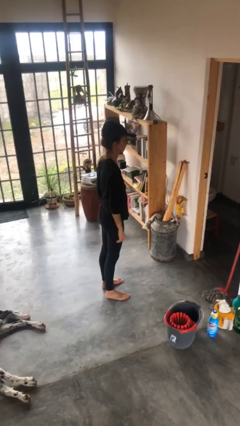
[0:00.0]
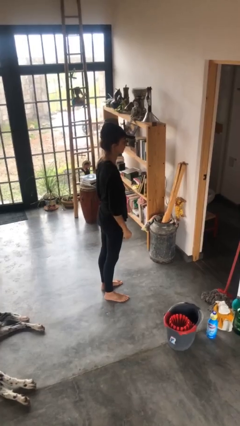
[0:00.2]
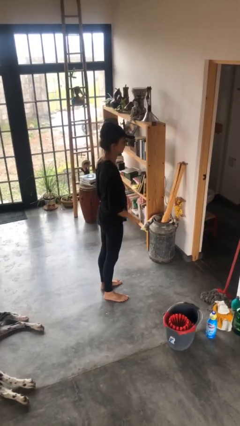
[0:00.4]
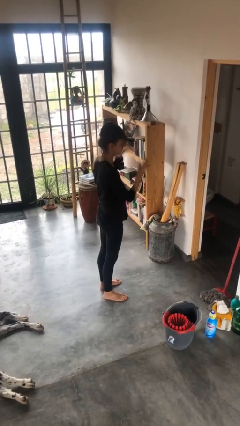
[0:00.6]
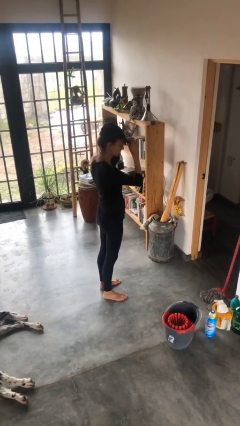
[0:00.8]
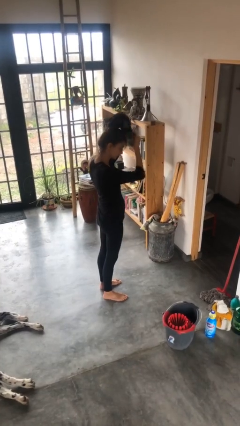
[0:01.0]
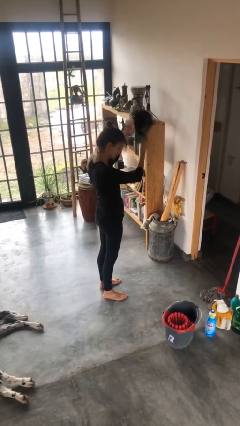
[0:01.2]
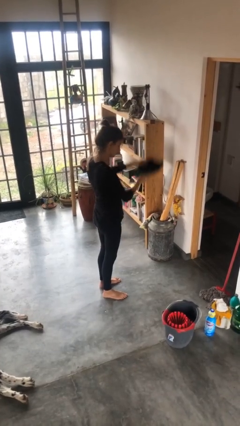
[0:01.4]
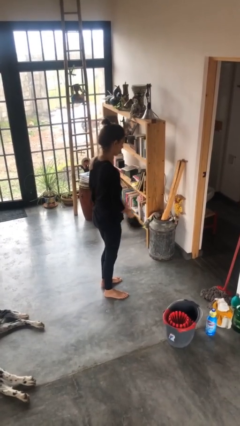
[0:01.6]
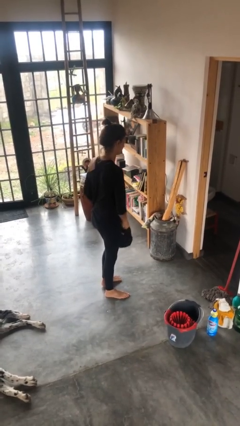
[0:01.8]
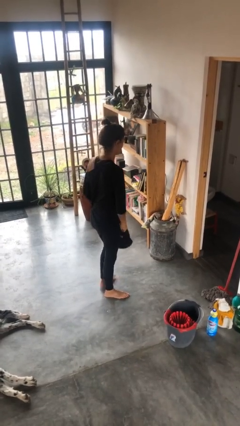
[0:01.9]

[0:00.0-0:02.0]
person takes off hat

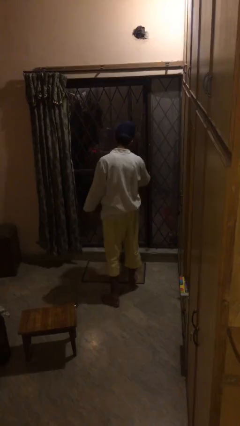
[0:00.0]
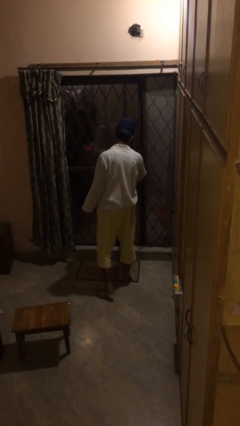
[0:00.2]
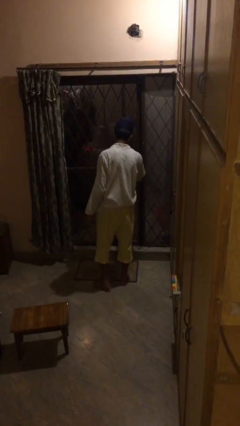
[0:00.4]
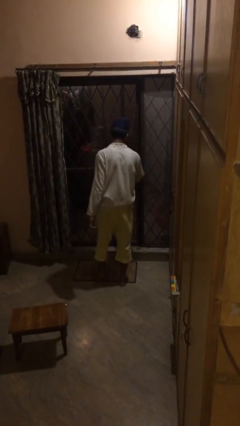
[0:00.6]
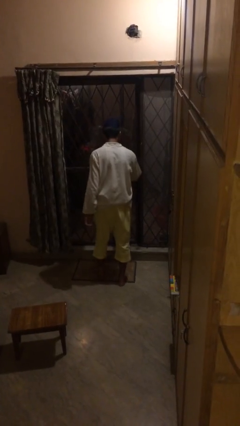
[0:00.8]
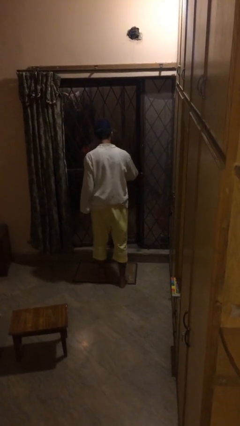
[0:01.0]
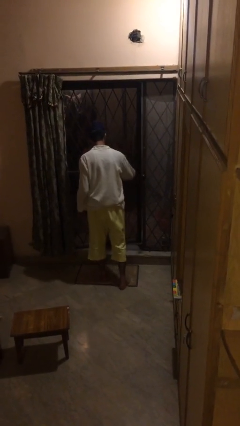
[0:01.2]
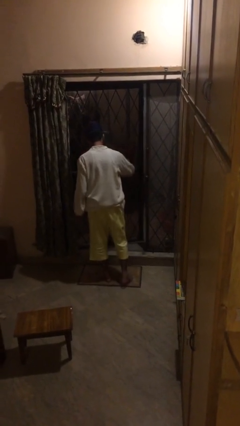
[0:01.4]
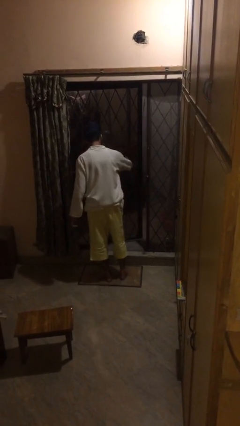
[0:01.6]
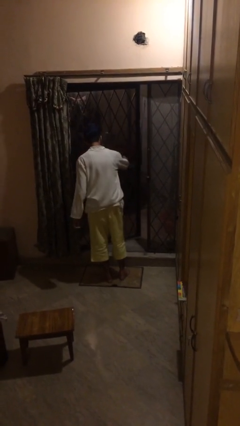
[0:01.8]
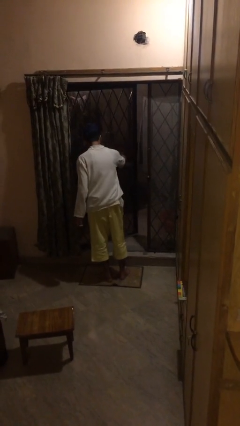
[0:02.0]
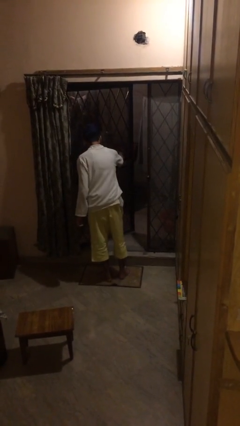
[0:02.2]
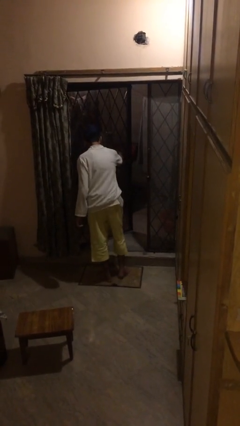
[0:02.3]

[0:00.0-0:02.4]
person opens facility door

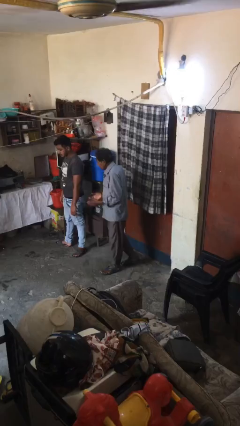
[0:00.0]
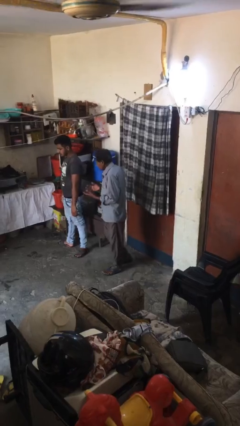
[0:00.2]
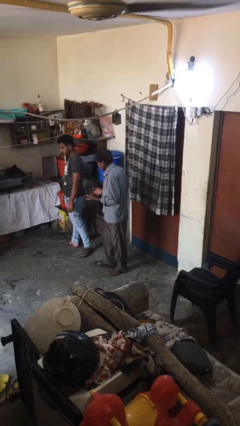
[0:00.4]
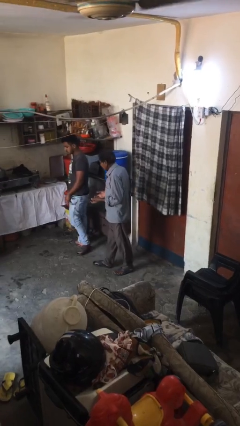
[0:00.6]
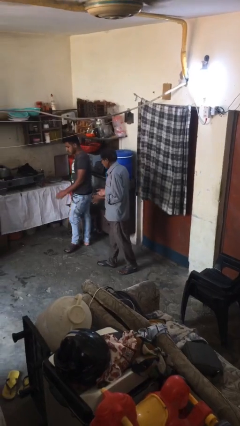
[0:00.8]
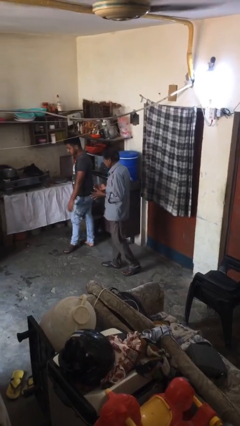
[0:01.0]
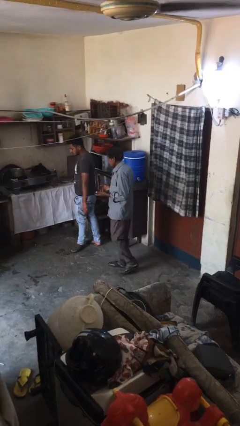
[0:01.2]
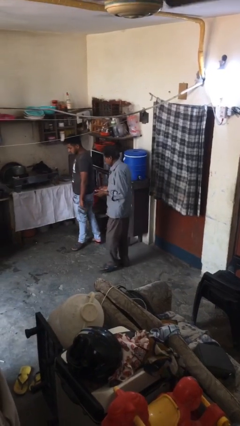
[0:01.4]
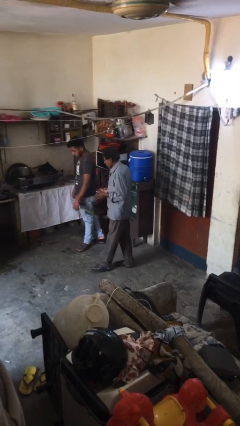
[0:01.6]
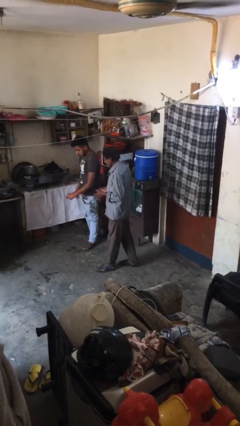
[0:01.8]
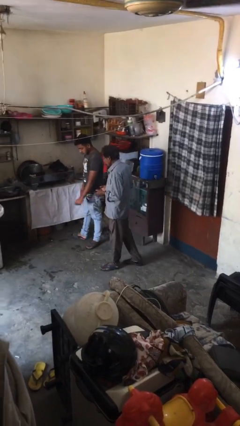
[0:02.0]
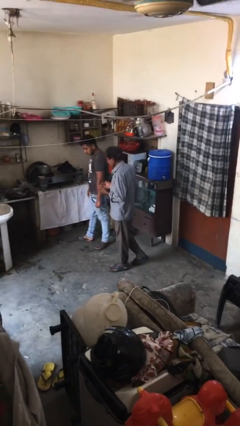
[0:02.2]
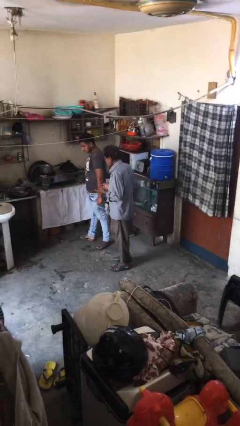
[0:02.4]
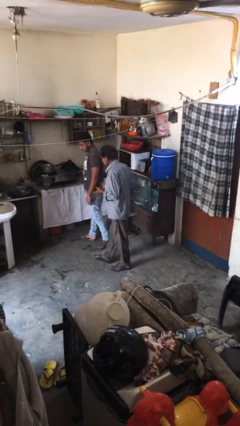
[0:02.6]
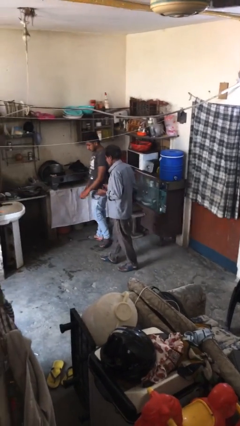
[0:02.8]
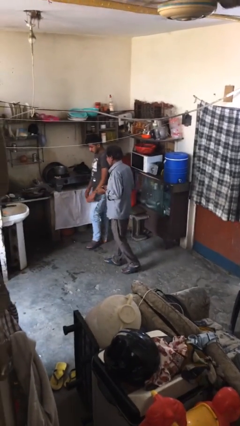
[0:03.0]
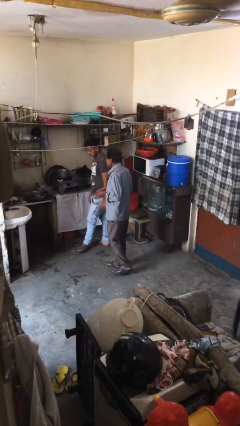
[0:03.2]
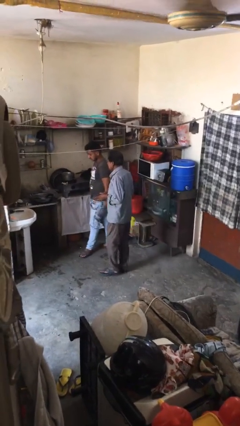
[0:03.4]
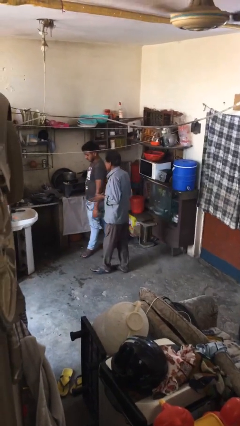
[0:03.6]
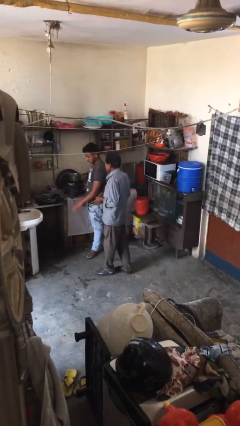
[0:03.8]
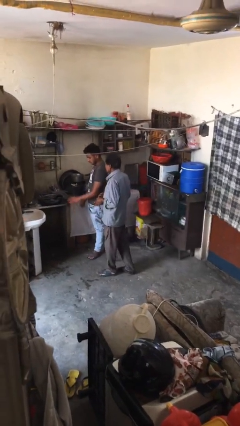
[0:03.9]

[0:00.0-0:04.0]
person talks to person

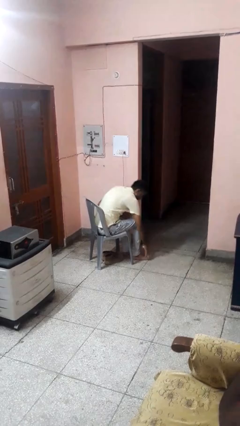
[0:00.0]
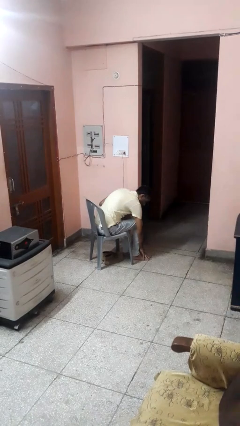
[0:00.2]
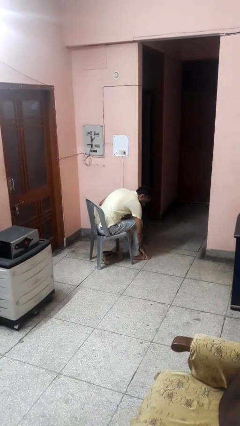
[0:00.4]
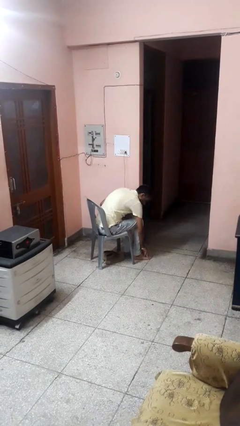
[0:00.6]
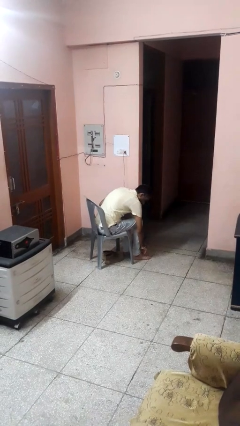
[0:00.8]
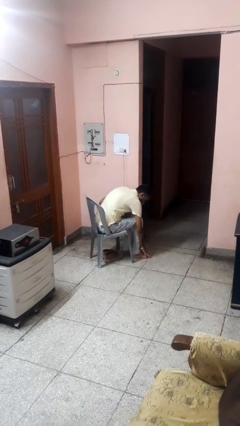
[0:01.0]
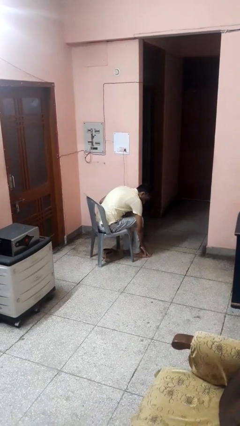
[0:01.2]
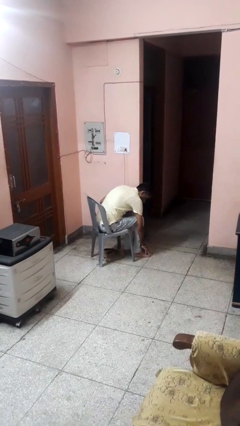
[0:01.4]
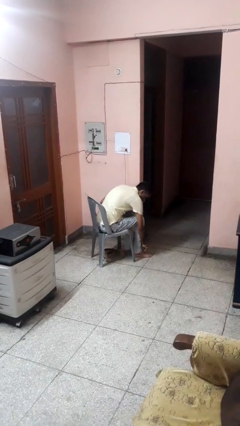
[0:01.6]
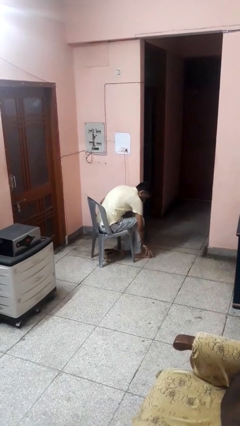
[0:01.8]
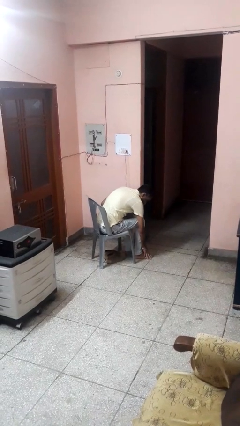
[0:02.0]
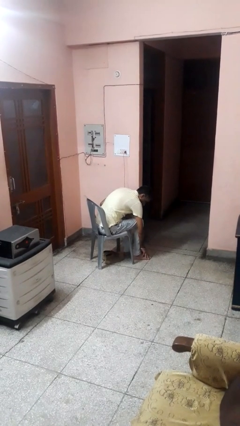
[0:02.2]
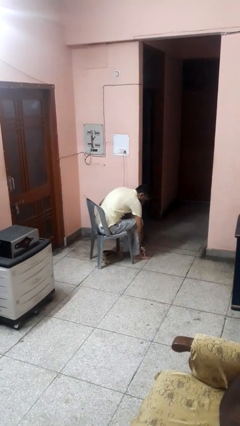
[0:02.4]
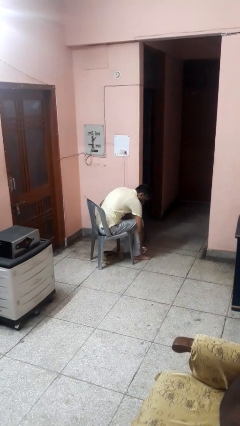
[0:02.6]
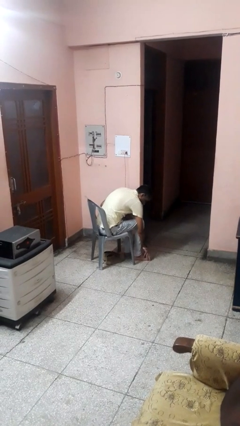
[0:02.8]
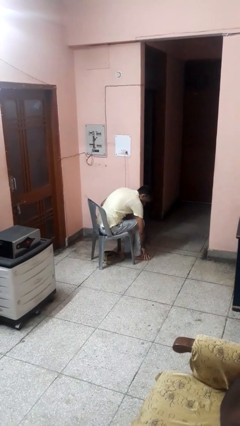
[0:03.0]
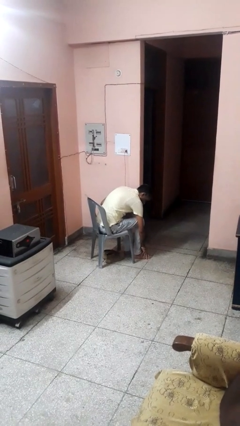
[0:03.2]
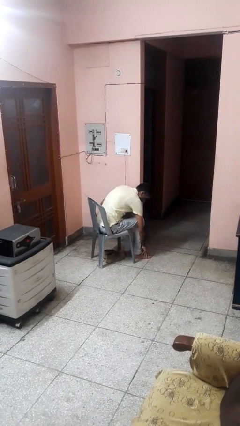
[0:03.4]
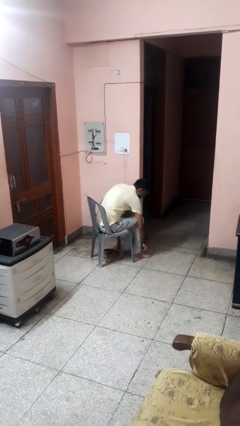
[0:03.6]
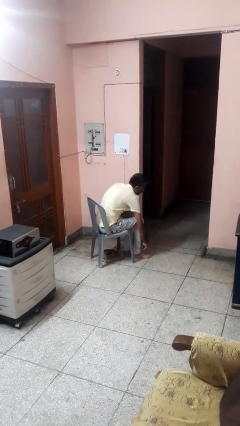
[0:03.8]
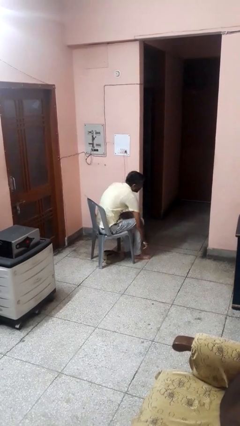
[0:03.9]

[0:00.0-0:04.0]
person rubs foot

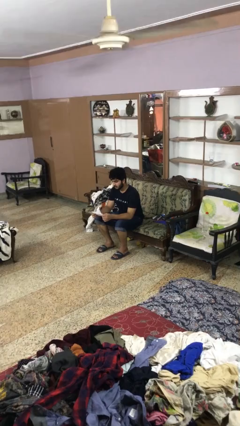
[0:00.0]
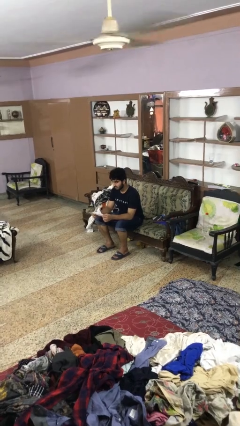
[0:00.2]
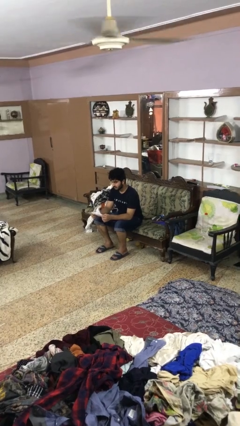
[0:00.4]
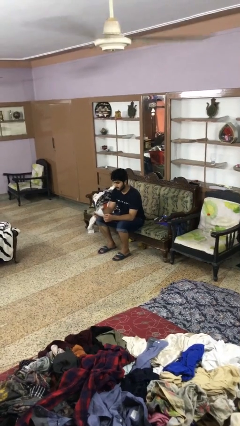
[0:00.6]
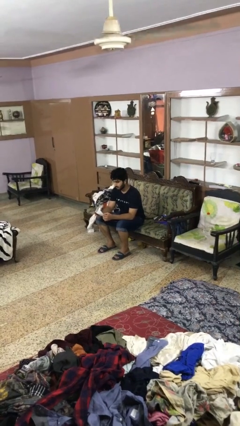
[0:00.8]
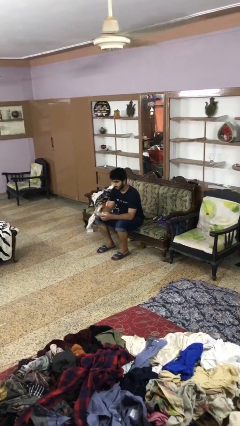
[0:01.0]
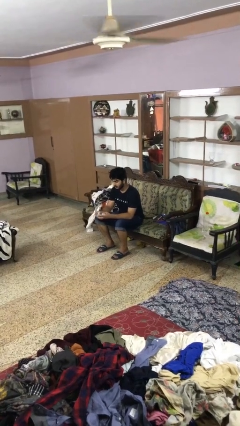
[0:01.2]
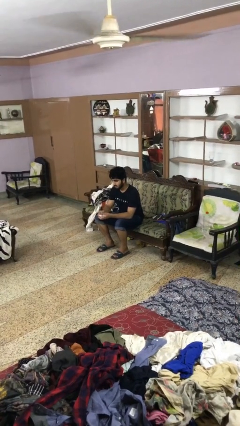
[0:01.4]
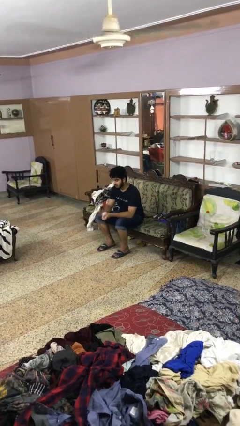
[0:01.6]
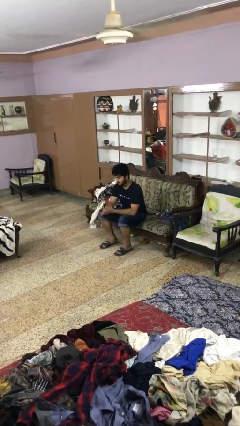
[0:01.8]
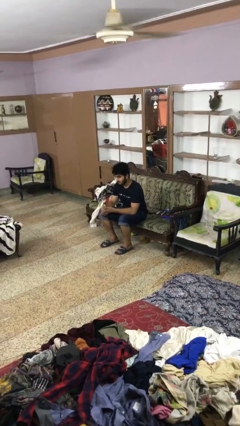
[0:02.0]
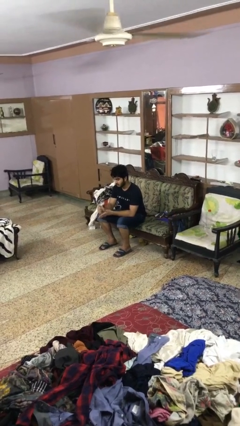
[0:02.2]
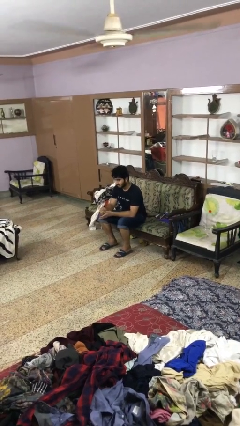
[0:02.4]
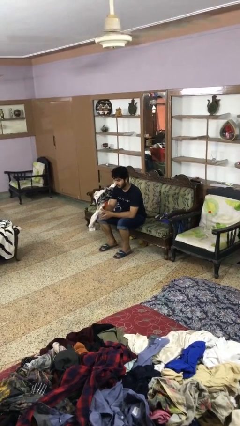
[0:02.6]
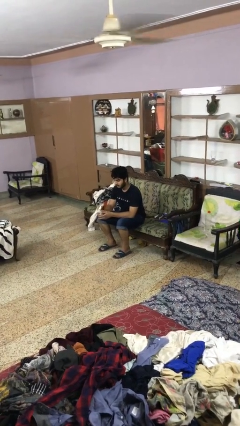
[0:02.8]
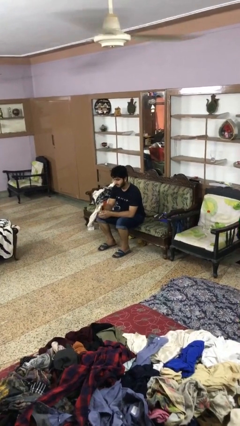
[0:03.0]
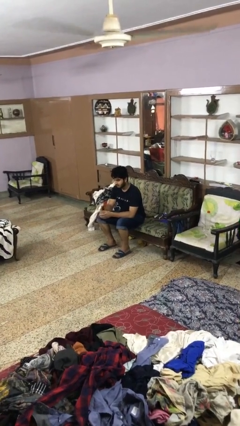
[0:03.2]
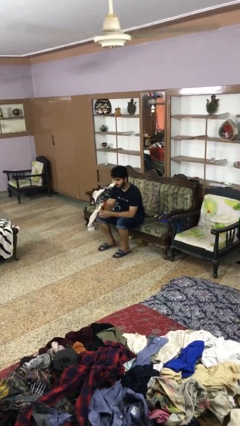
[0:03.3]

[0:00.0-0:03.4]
person crumples paper

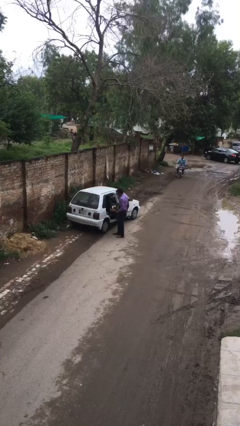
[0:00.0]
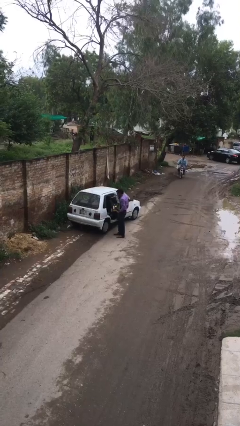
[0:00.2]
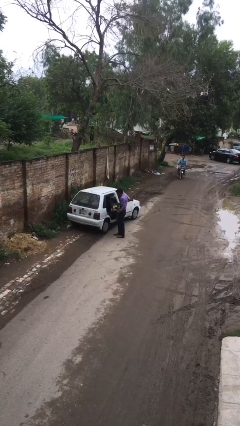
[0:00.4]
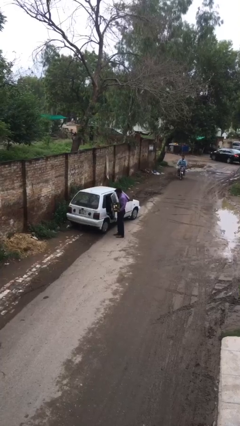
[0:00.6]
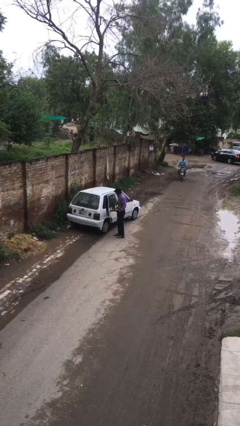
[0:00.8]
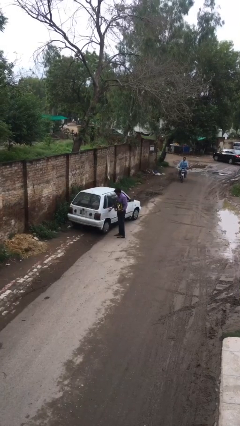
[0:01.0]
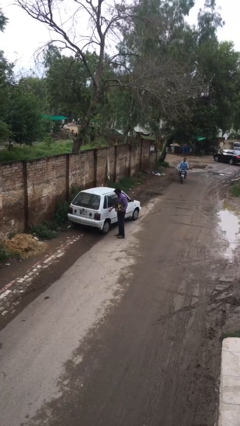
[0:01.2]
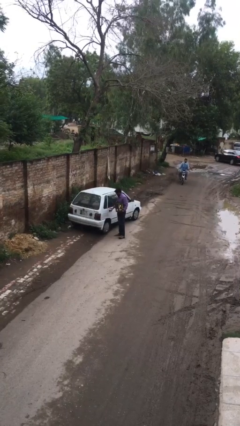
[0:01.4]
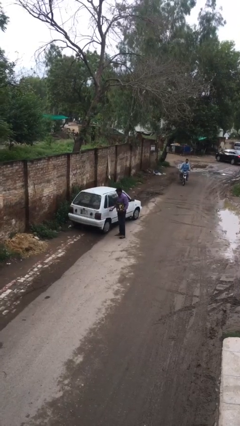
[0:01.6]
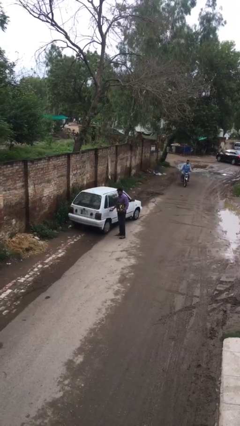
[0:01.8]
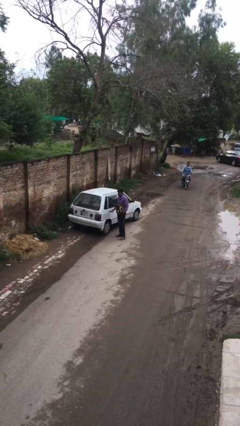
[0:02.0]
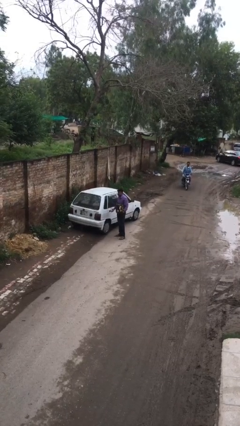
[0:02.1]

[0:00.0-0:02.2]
person closes car door
